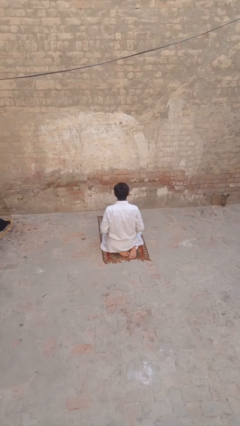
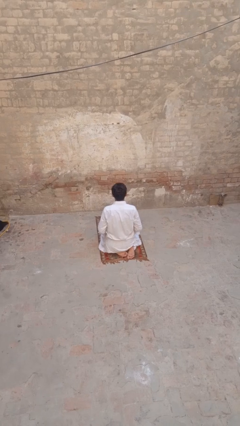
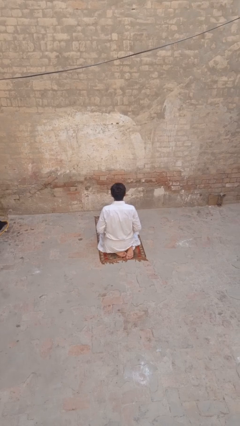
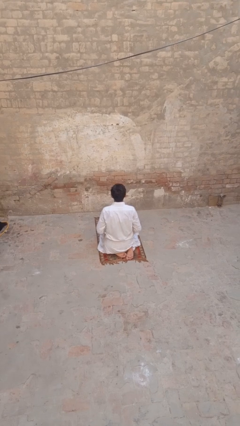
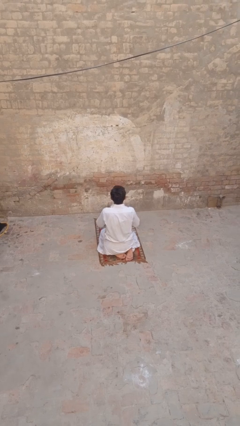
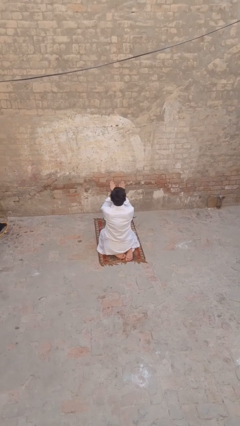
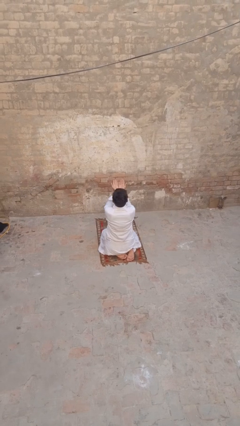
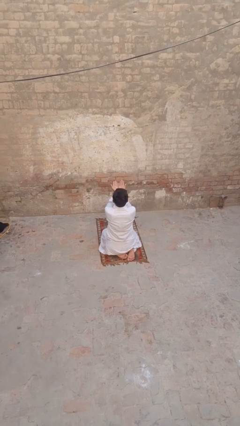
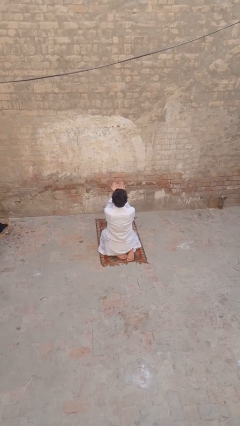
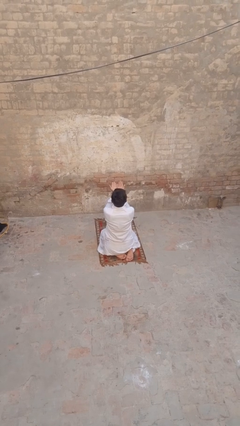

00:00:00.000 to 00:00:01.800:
person prays

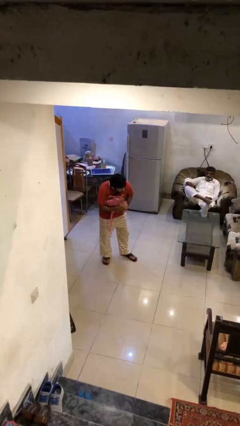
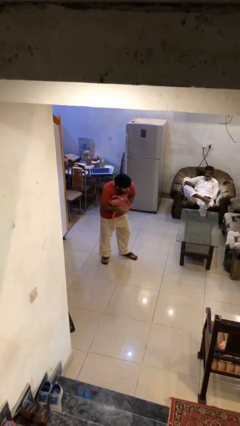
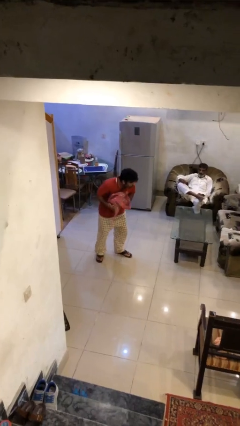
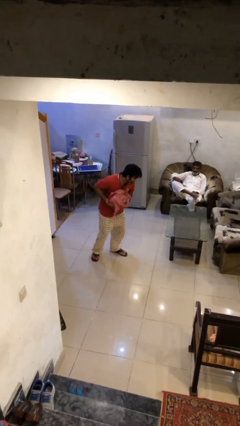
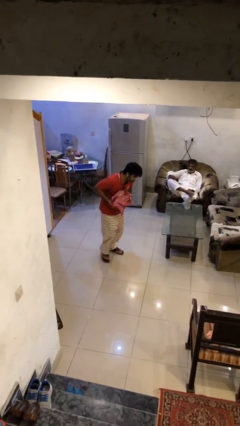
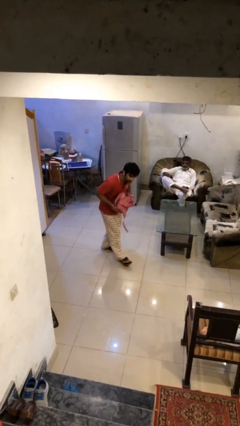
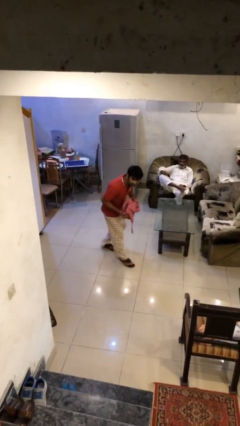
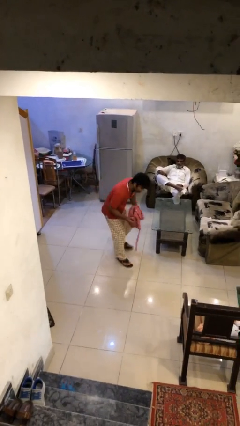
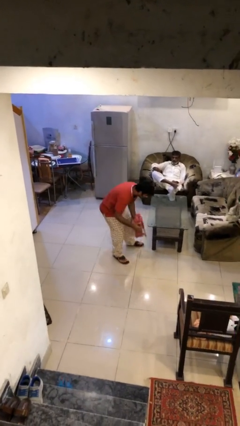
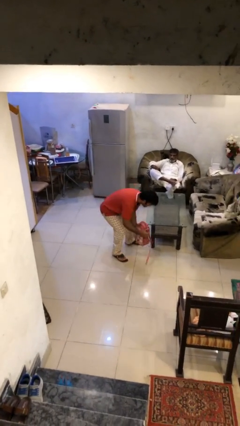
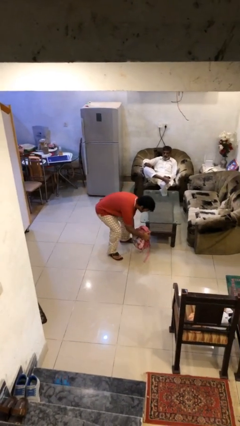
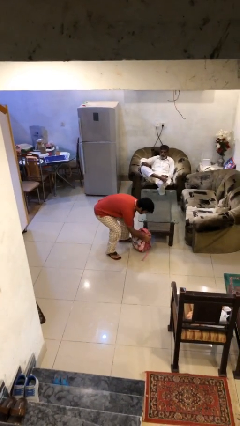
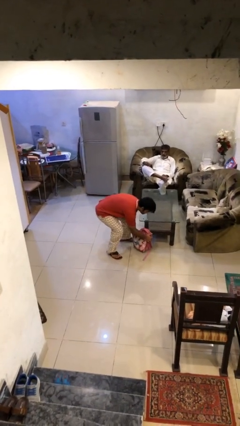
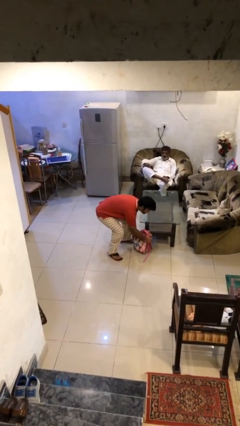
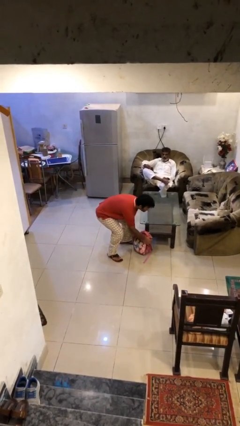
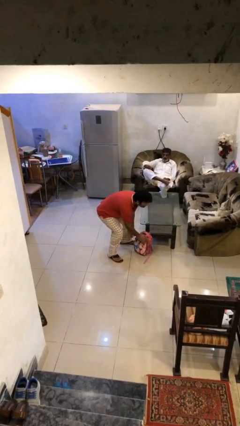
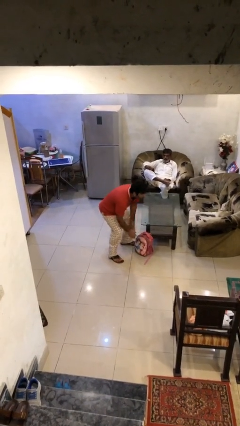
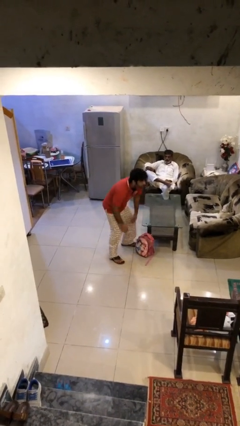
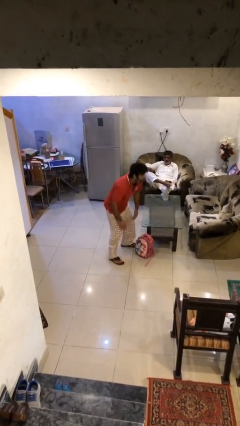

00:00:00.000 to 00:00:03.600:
person puts down object on floor

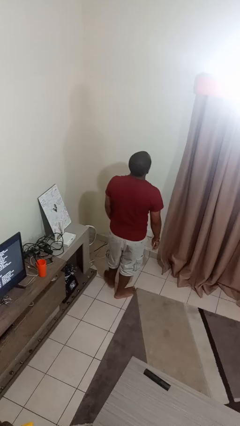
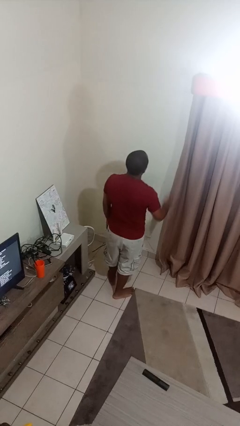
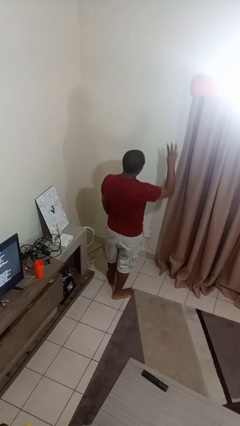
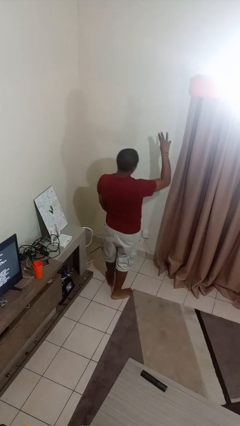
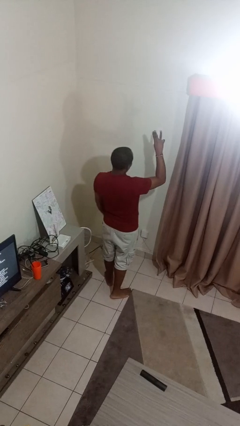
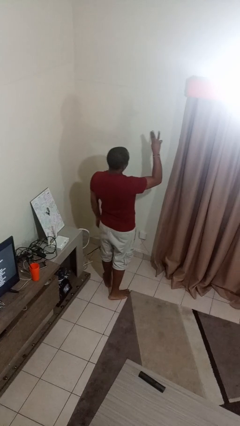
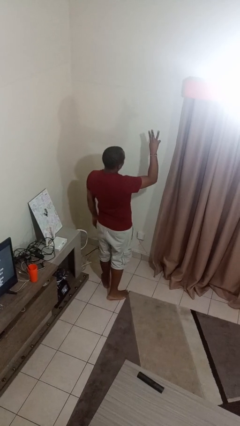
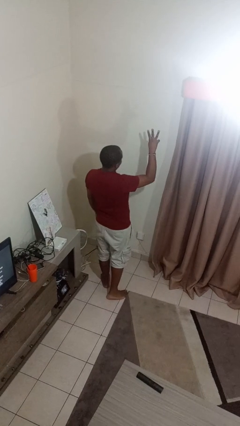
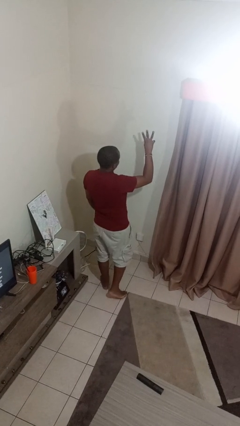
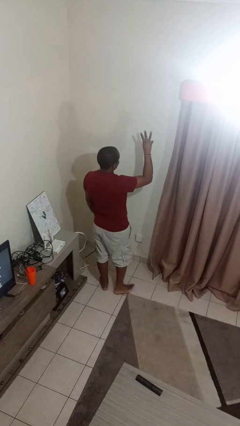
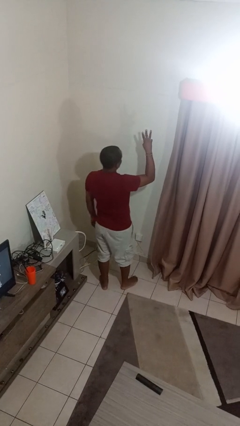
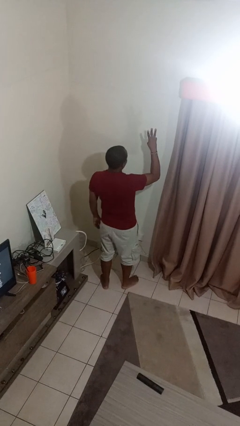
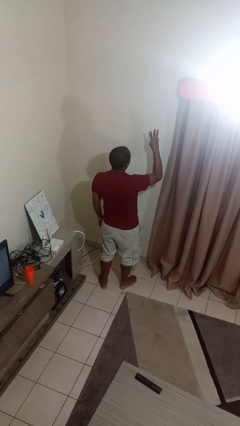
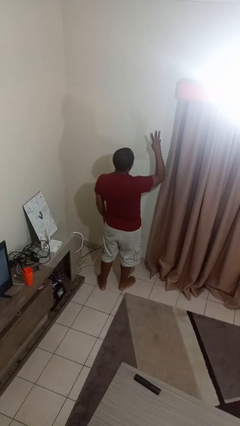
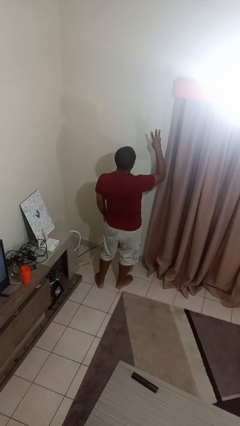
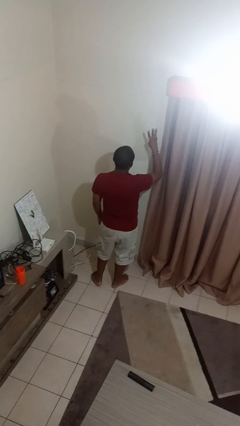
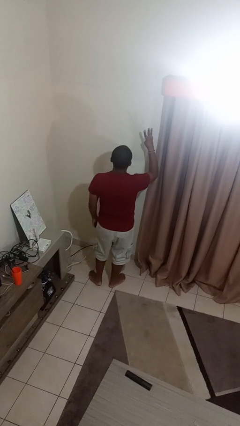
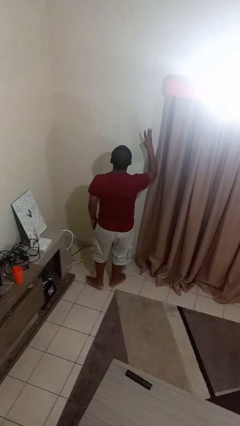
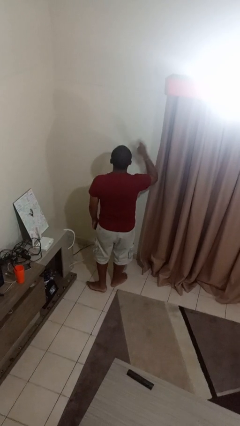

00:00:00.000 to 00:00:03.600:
person gestures number three

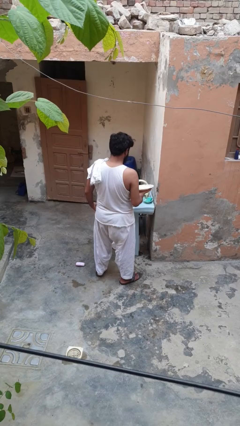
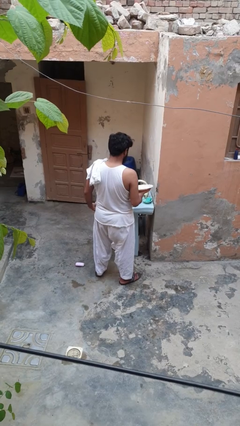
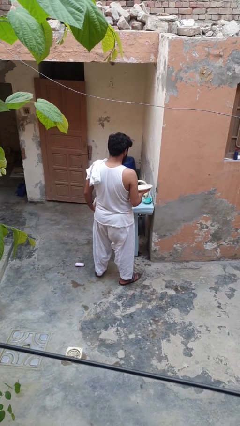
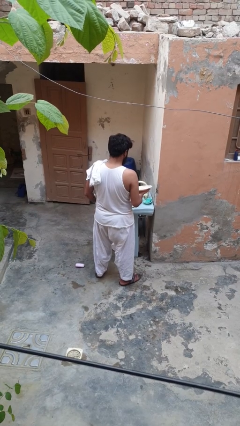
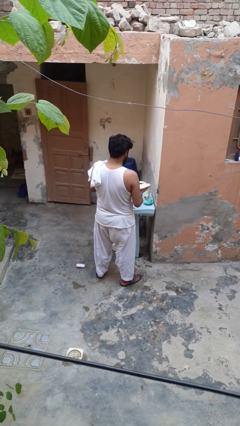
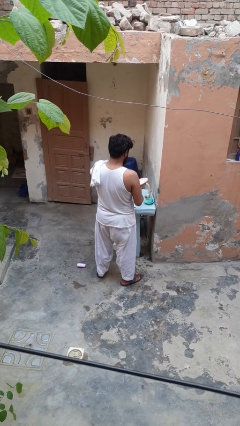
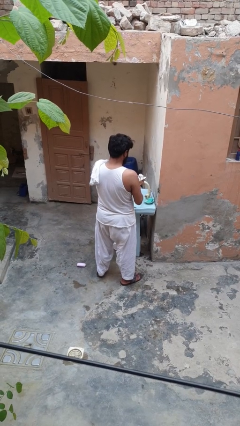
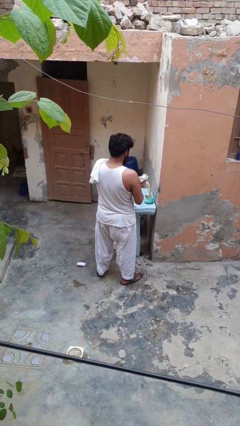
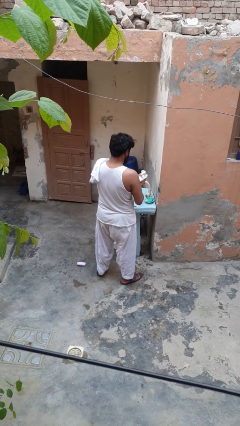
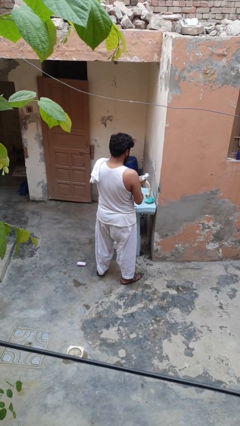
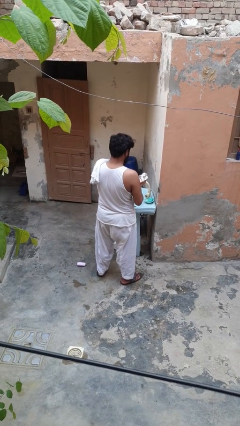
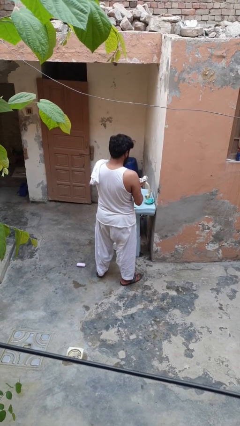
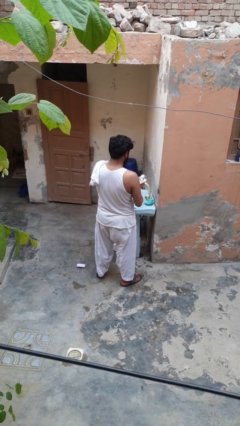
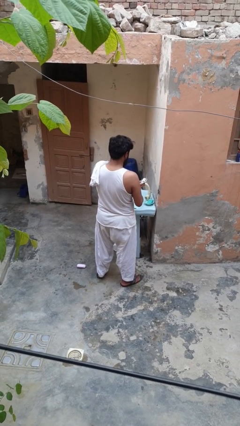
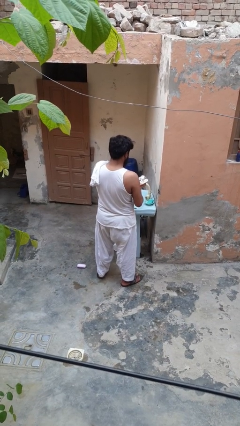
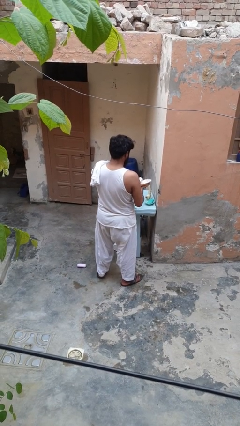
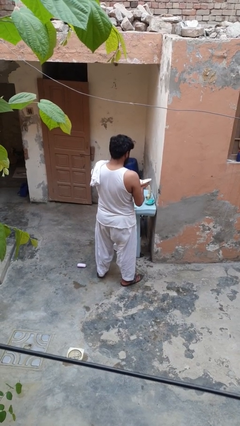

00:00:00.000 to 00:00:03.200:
person dries dish

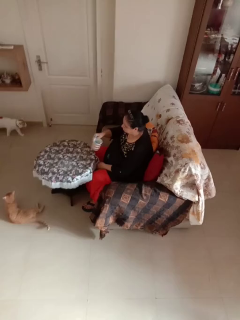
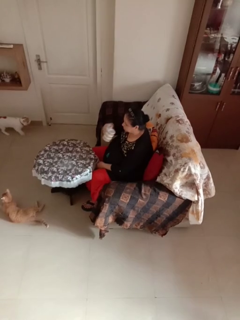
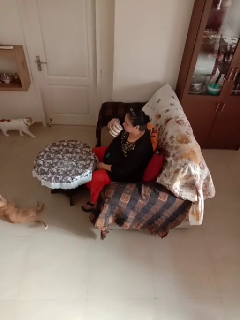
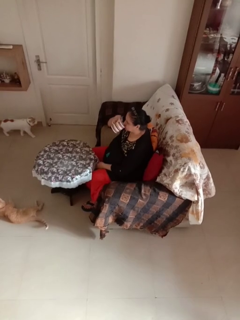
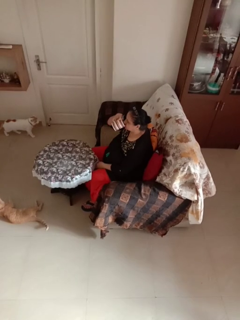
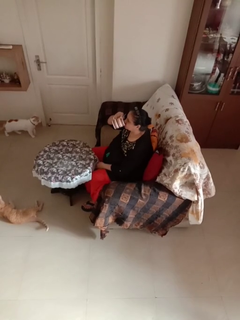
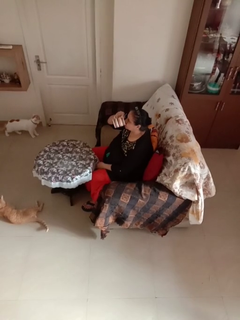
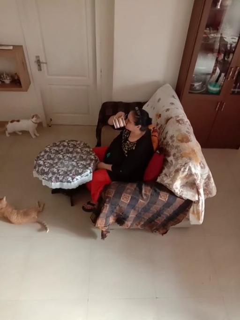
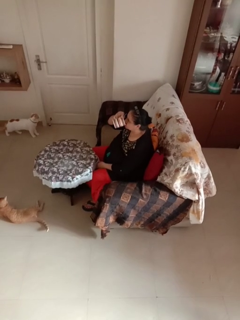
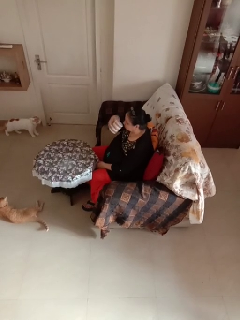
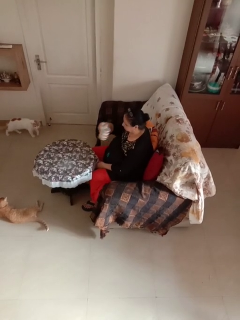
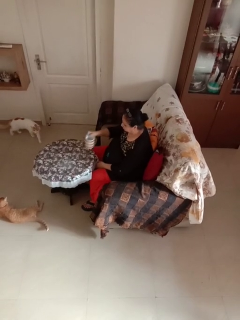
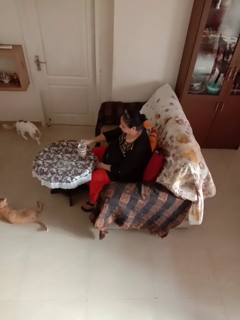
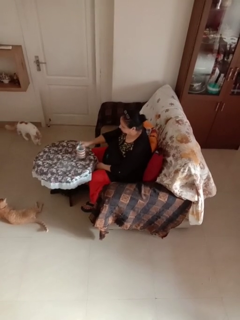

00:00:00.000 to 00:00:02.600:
person drinks from mug

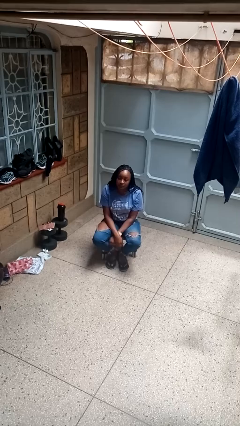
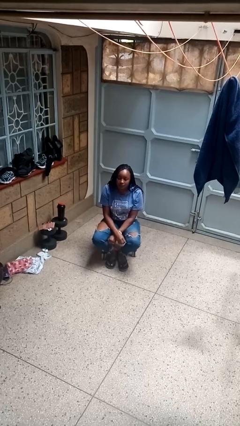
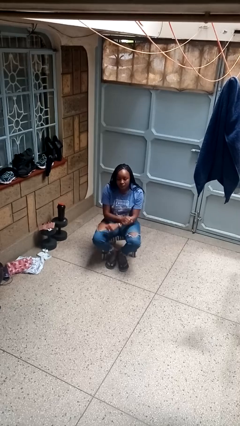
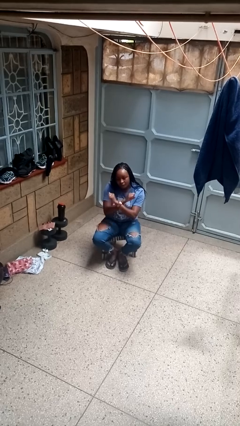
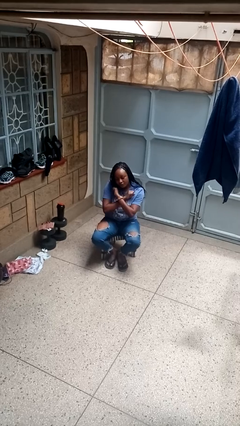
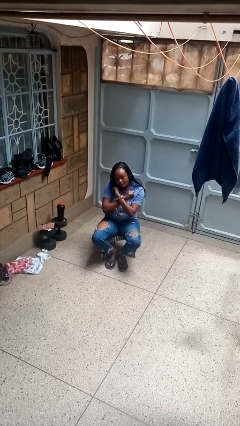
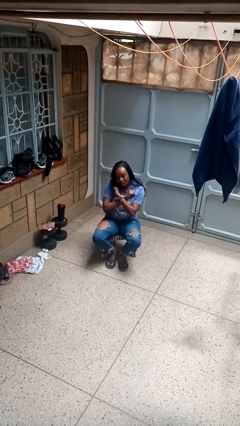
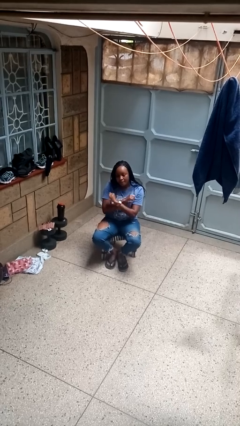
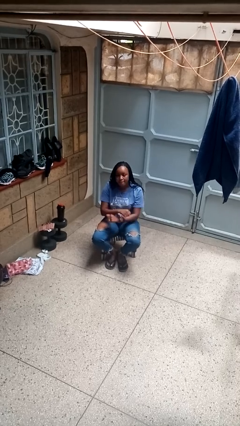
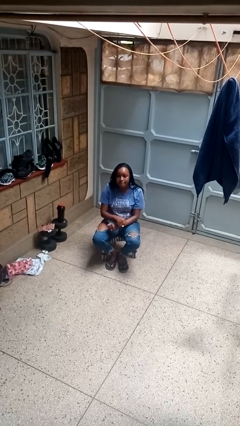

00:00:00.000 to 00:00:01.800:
person gestures arms x

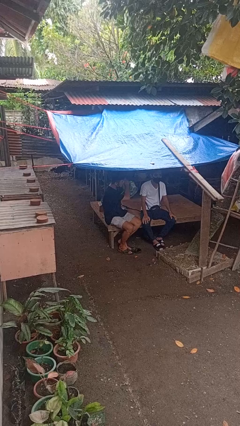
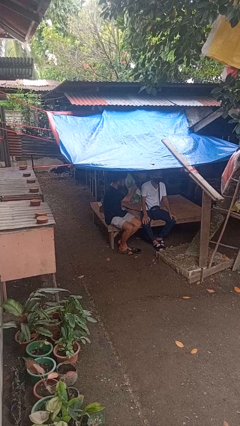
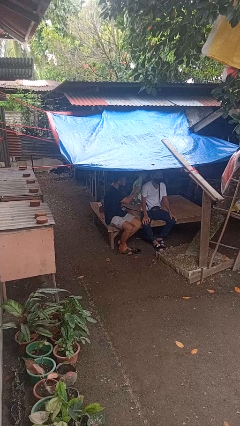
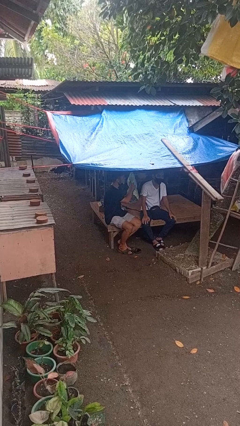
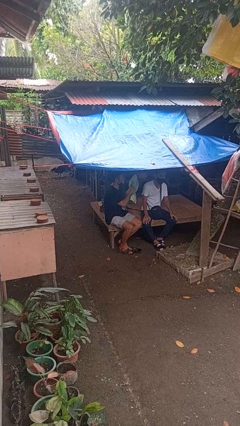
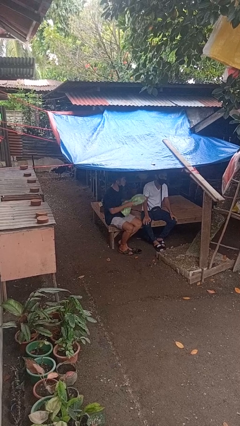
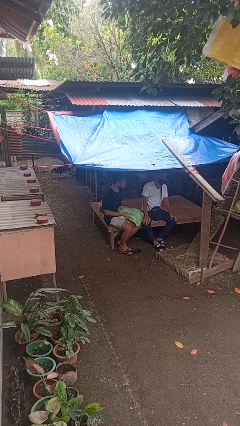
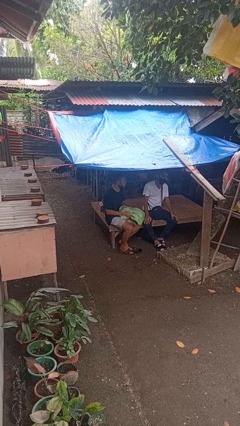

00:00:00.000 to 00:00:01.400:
person hits person with pillow
